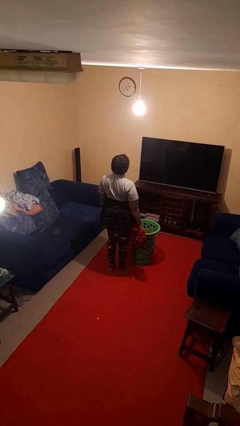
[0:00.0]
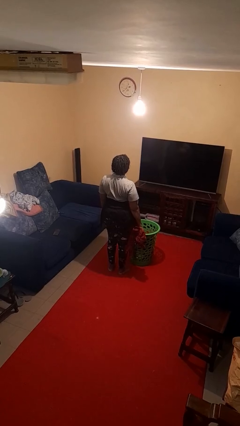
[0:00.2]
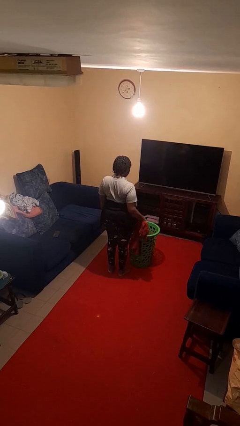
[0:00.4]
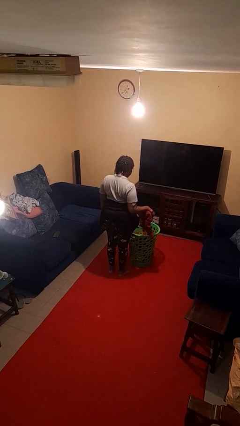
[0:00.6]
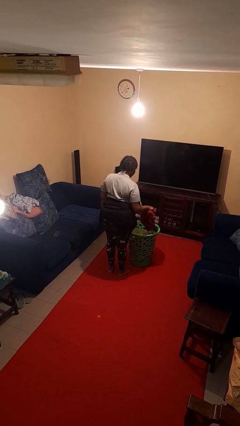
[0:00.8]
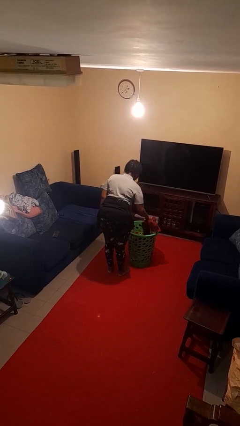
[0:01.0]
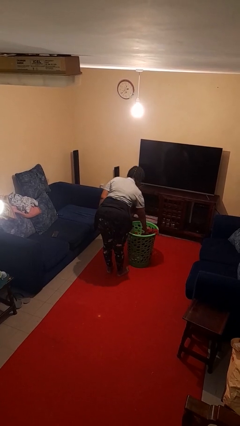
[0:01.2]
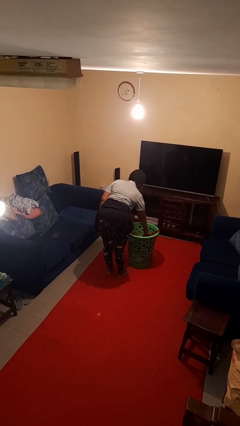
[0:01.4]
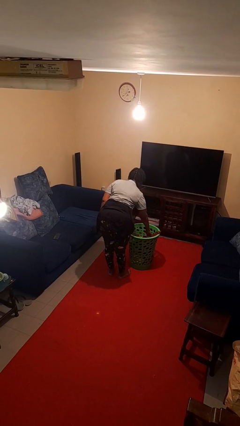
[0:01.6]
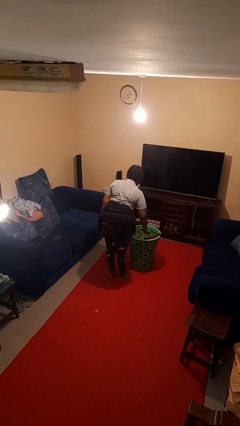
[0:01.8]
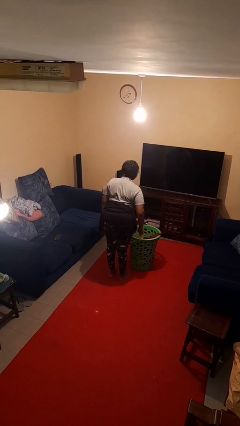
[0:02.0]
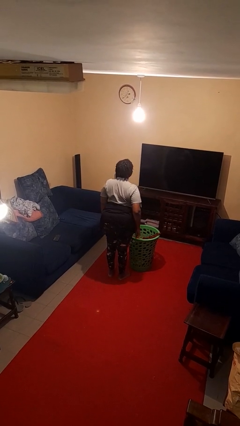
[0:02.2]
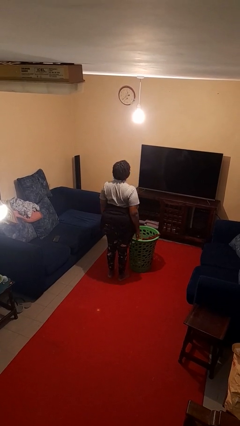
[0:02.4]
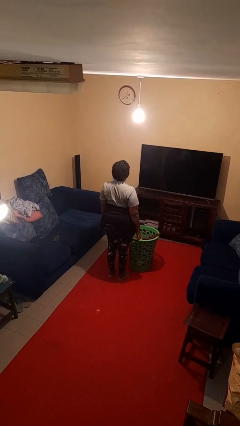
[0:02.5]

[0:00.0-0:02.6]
person puts object into basket

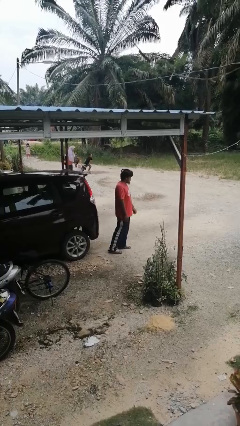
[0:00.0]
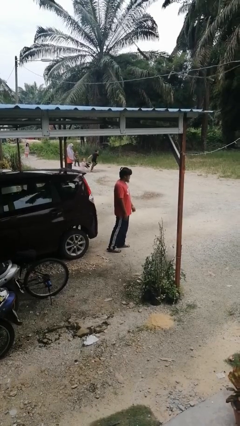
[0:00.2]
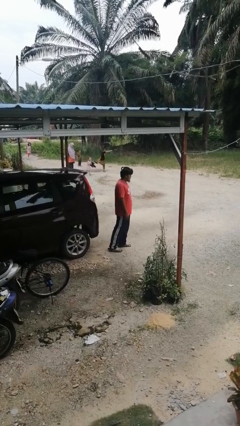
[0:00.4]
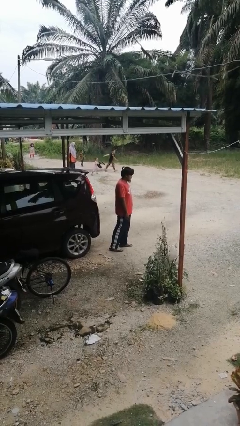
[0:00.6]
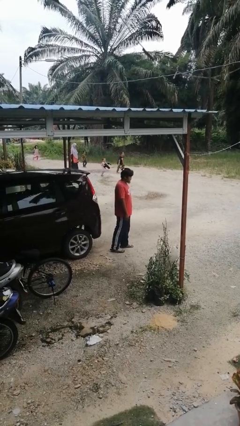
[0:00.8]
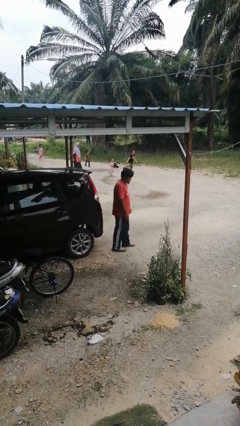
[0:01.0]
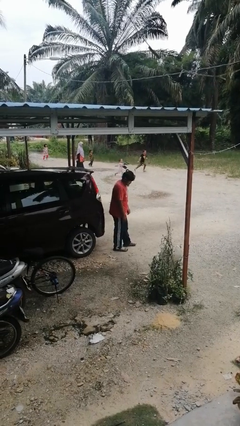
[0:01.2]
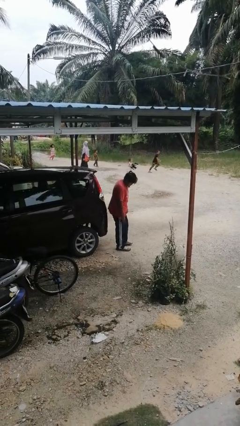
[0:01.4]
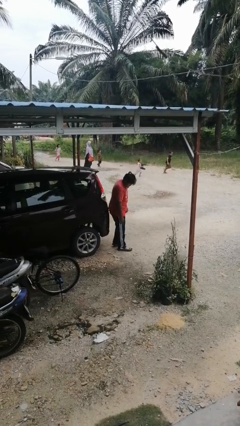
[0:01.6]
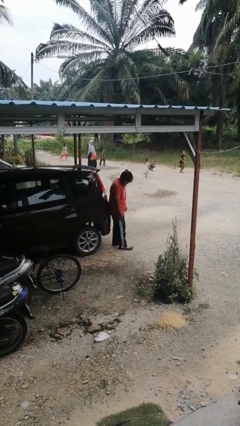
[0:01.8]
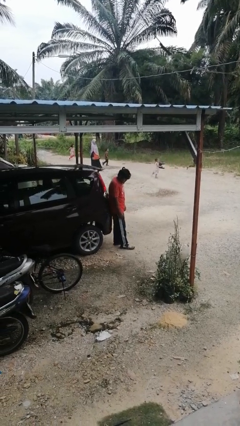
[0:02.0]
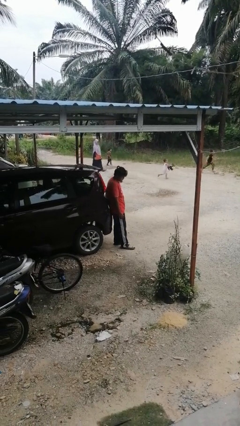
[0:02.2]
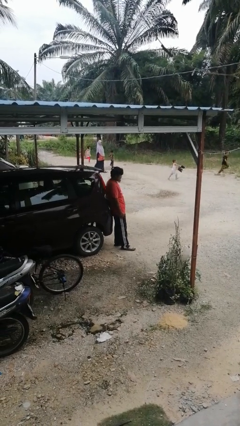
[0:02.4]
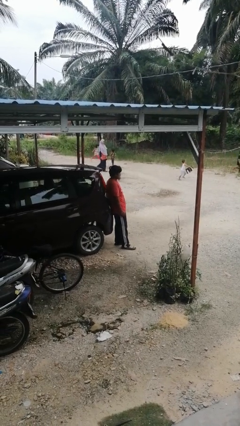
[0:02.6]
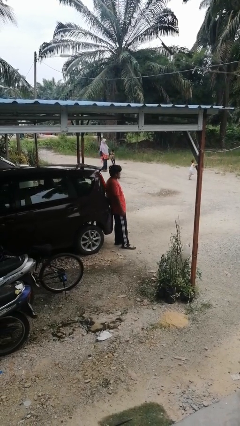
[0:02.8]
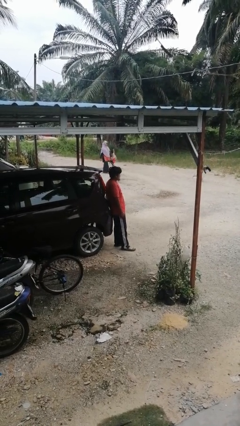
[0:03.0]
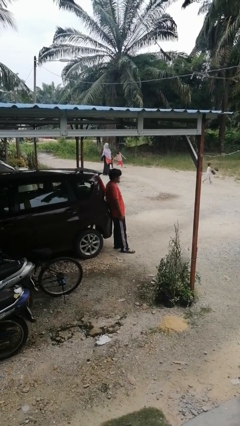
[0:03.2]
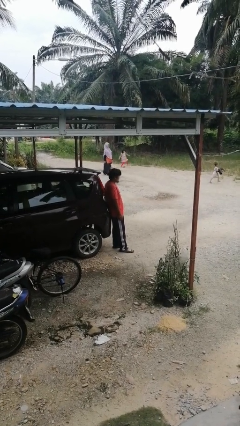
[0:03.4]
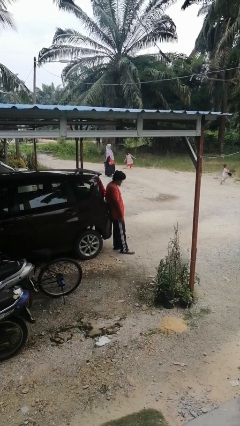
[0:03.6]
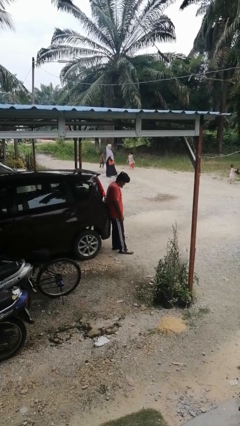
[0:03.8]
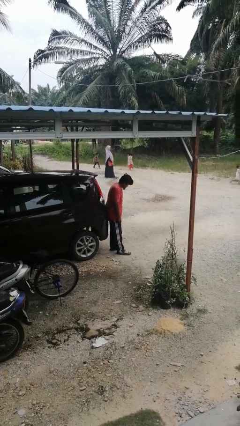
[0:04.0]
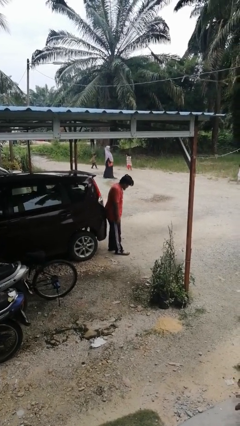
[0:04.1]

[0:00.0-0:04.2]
person leans against car

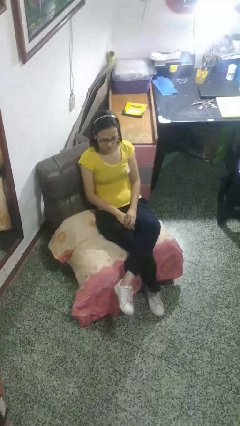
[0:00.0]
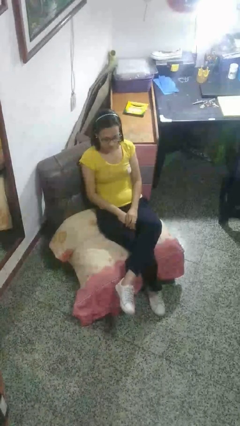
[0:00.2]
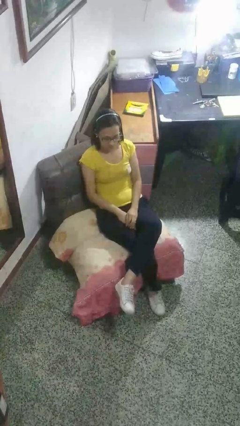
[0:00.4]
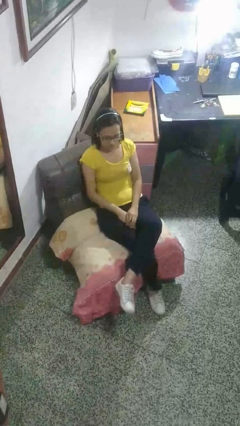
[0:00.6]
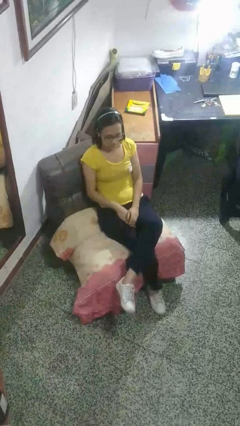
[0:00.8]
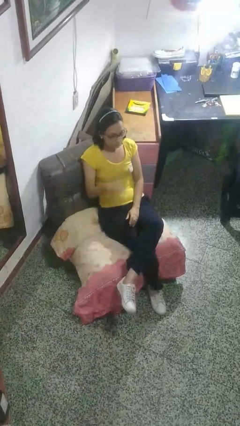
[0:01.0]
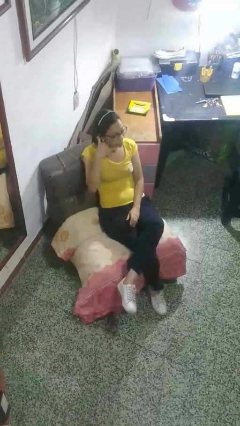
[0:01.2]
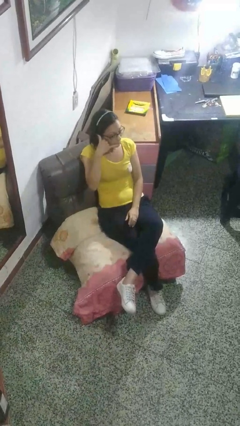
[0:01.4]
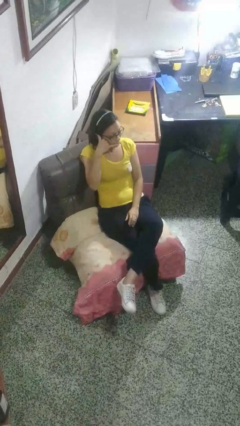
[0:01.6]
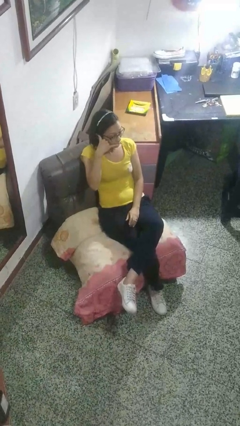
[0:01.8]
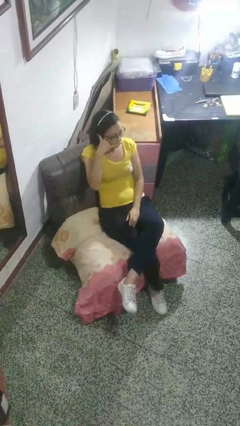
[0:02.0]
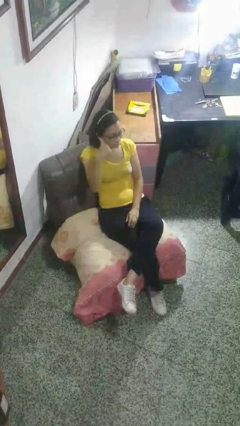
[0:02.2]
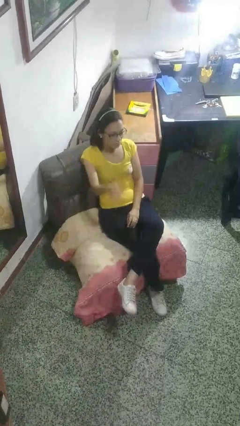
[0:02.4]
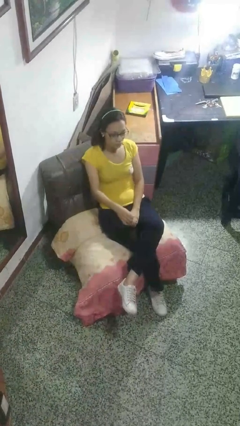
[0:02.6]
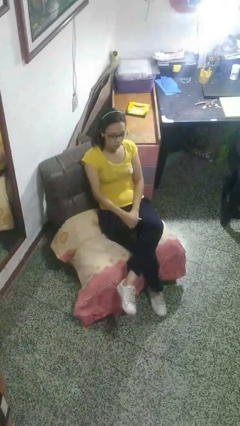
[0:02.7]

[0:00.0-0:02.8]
person gestures call me

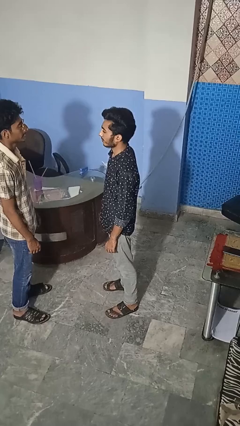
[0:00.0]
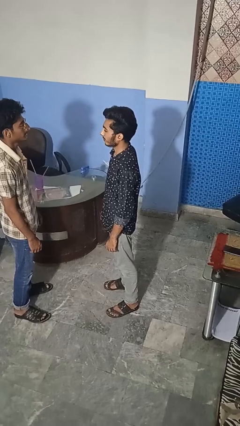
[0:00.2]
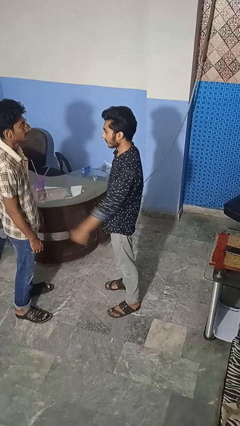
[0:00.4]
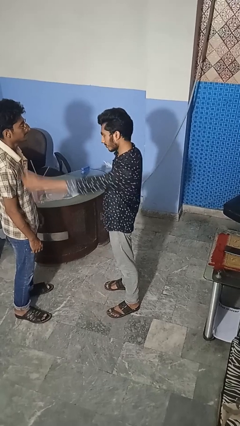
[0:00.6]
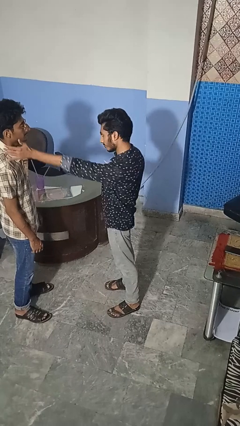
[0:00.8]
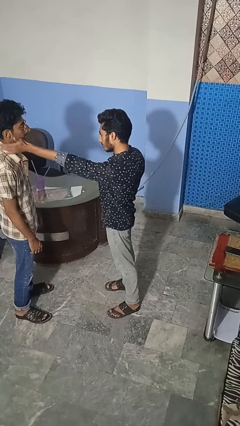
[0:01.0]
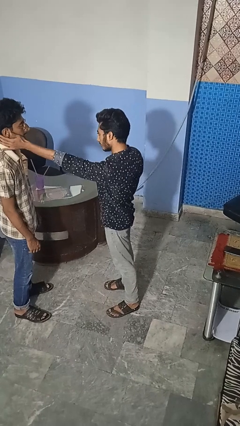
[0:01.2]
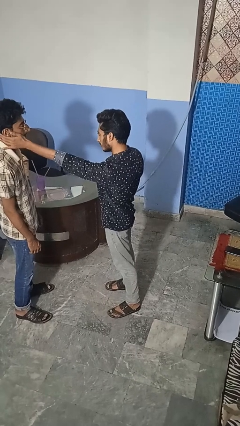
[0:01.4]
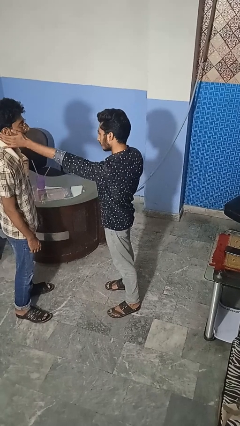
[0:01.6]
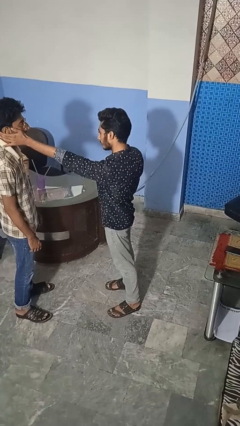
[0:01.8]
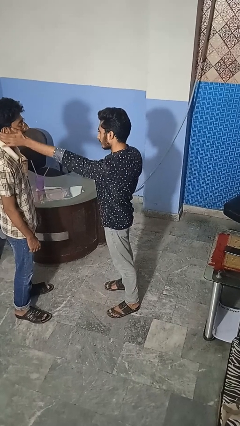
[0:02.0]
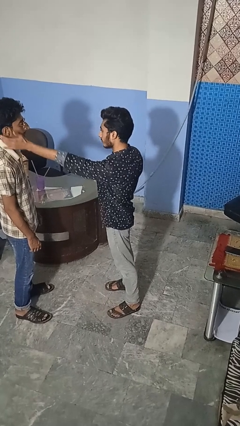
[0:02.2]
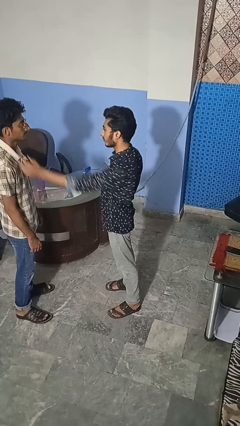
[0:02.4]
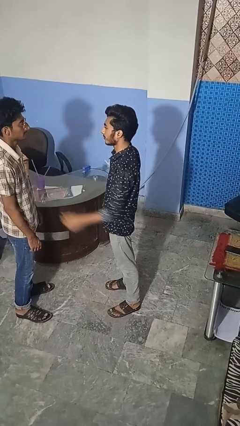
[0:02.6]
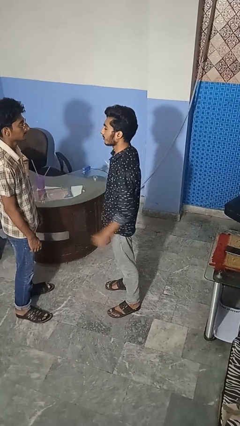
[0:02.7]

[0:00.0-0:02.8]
person touches face of person

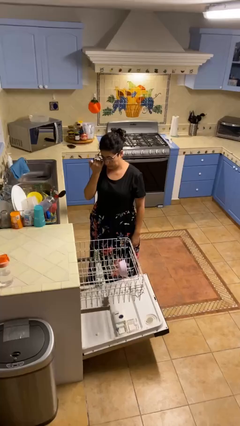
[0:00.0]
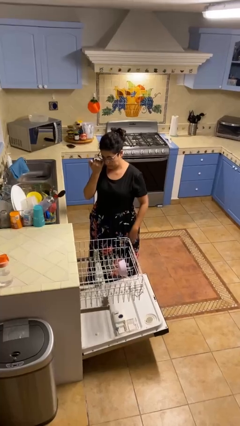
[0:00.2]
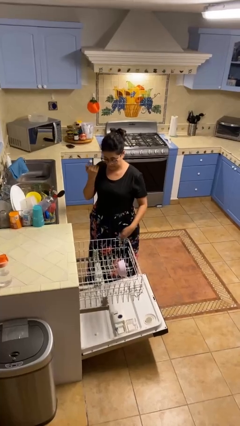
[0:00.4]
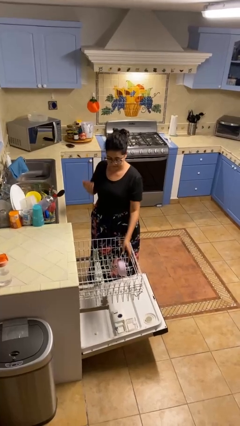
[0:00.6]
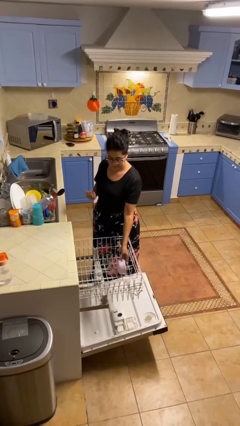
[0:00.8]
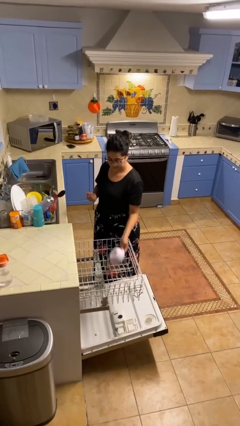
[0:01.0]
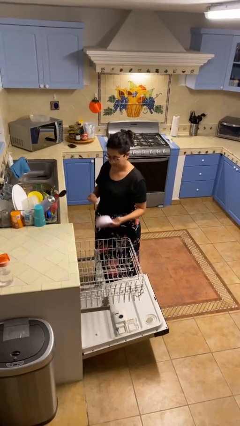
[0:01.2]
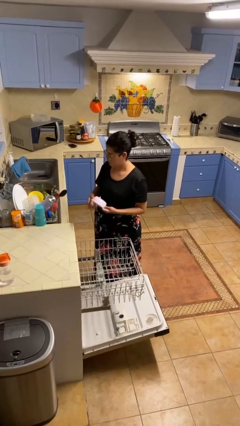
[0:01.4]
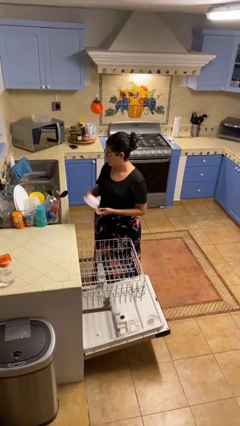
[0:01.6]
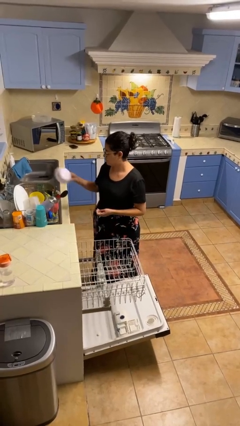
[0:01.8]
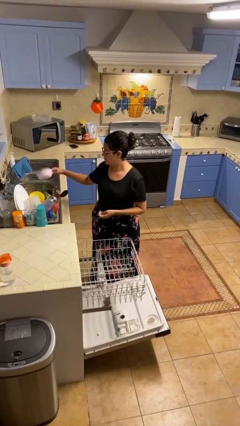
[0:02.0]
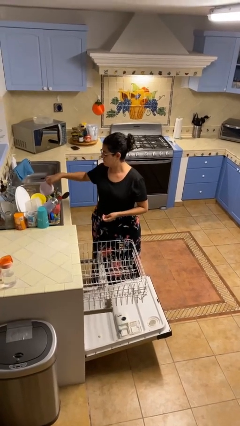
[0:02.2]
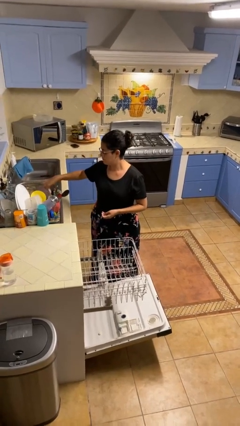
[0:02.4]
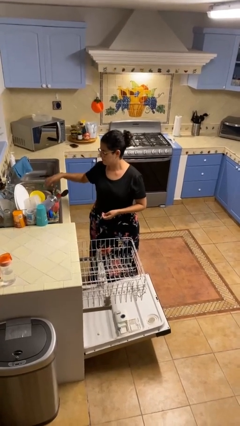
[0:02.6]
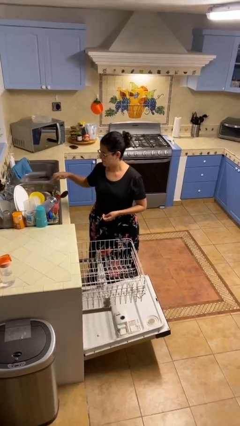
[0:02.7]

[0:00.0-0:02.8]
person unloads dishwasher

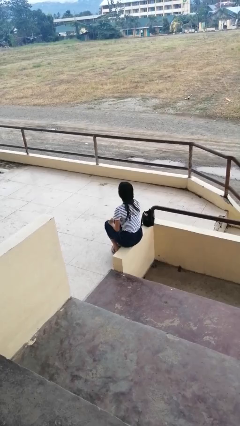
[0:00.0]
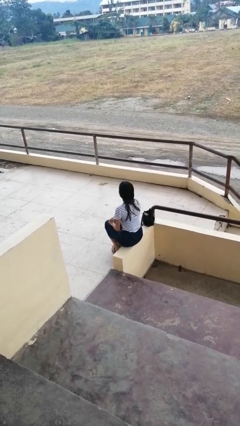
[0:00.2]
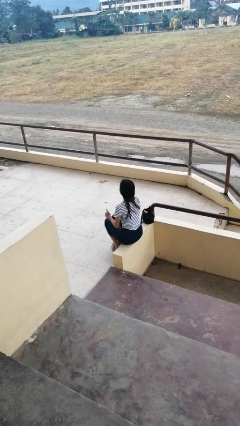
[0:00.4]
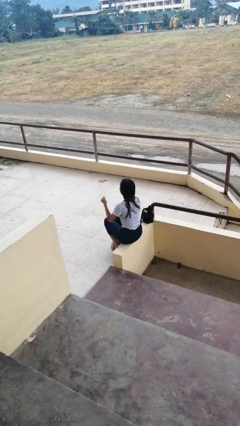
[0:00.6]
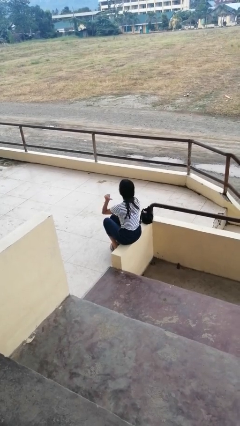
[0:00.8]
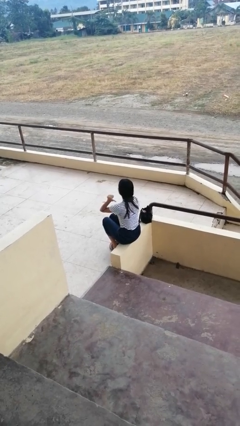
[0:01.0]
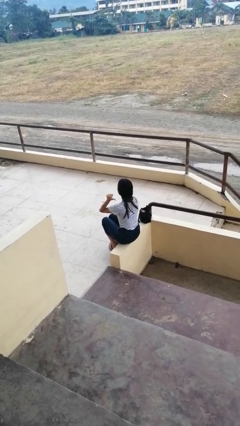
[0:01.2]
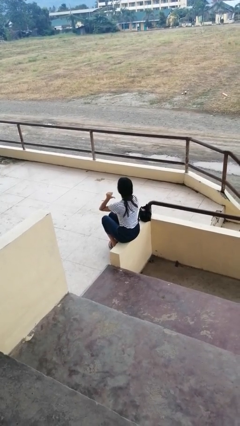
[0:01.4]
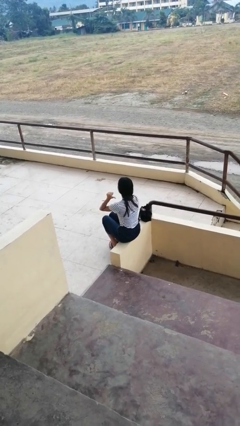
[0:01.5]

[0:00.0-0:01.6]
person gestures behind me

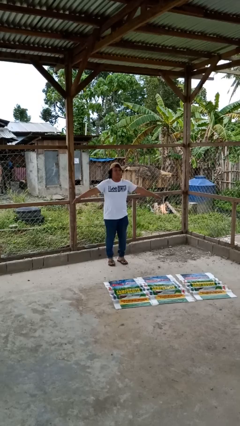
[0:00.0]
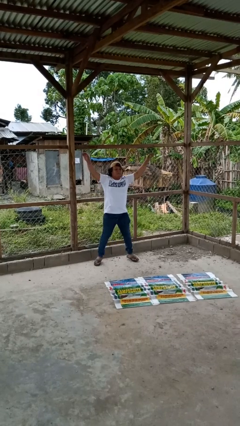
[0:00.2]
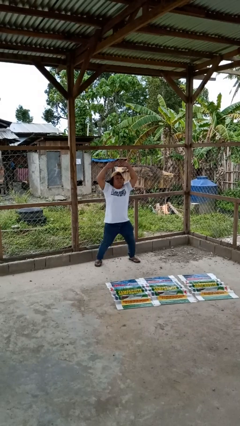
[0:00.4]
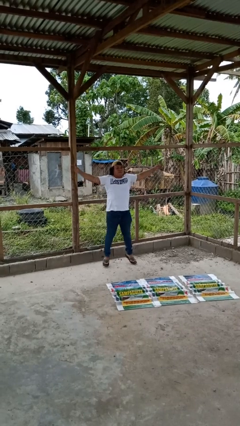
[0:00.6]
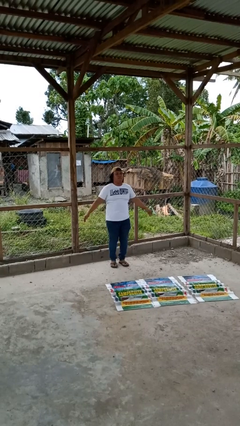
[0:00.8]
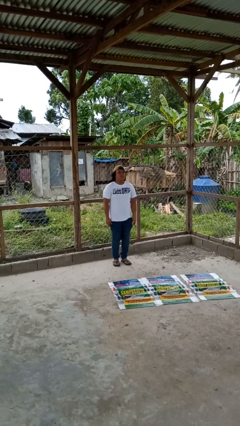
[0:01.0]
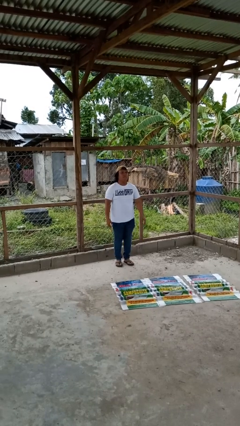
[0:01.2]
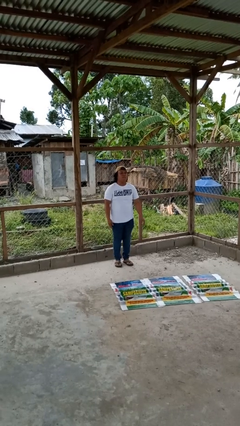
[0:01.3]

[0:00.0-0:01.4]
person exercises with jumping jacks
